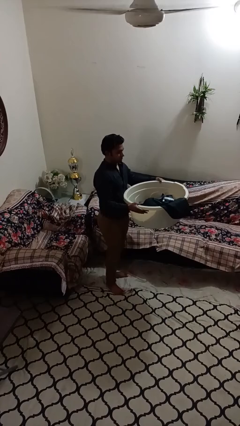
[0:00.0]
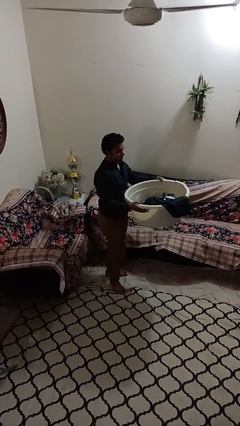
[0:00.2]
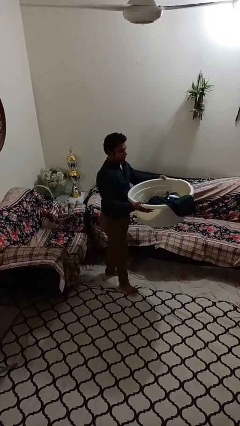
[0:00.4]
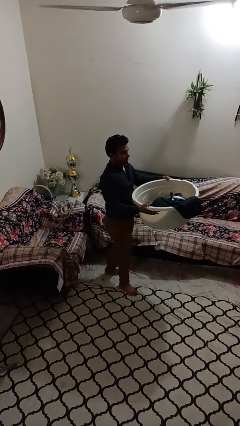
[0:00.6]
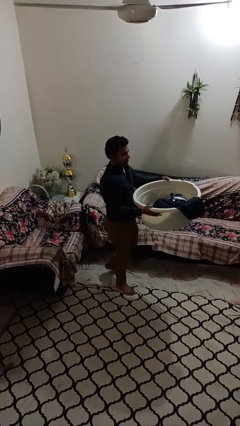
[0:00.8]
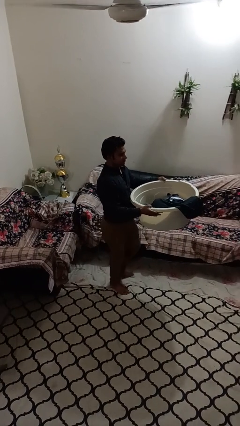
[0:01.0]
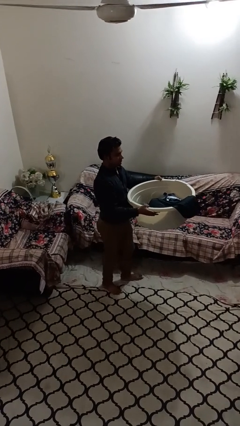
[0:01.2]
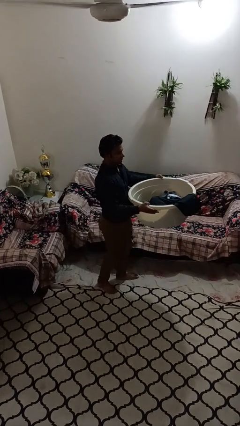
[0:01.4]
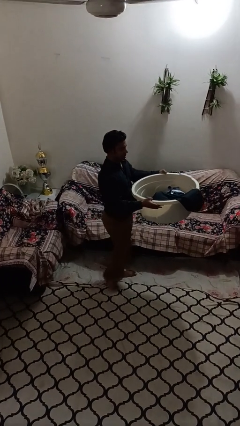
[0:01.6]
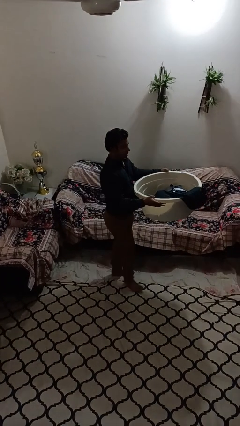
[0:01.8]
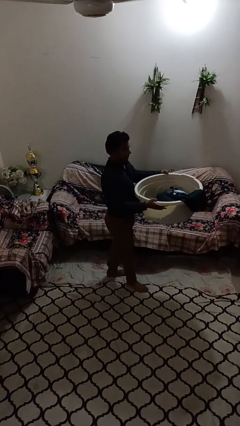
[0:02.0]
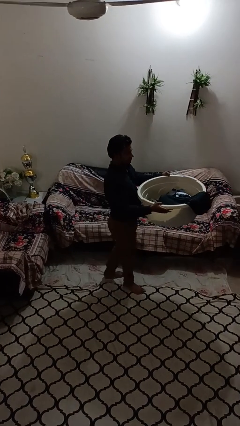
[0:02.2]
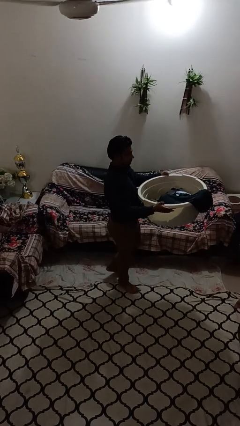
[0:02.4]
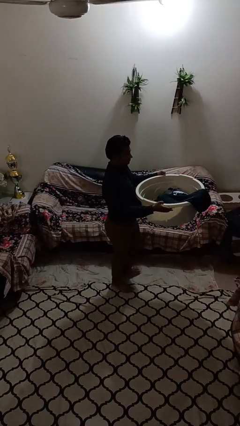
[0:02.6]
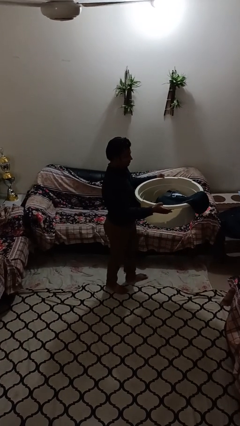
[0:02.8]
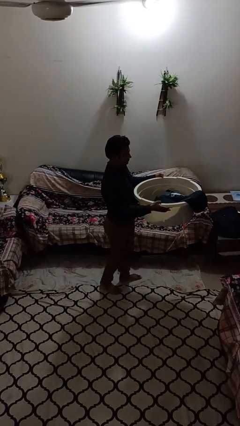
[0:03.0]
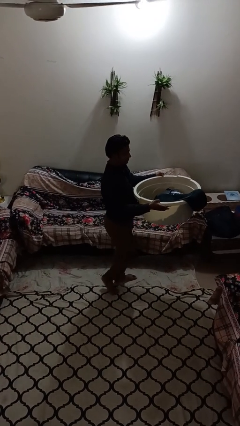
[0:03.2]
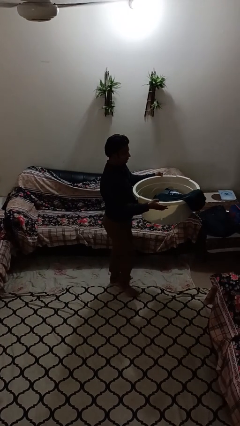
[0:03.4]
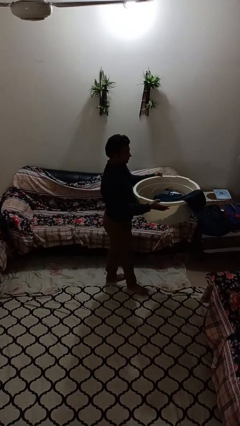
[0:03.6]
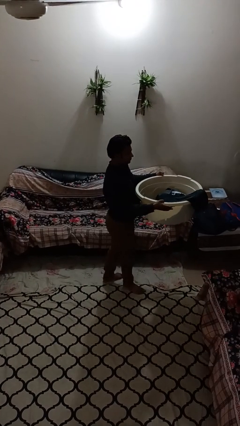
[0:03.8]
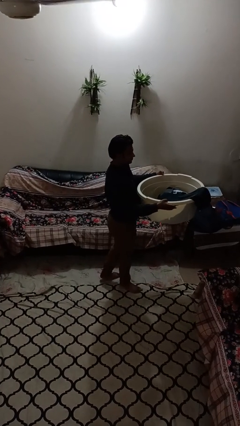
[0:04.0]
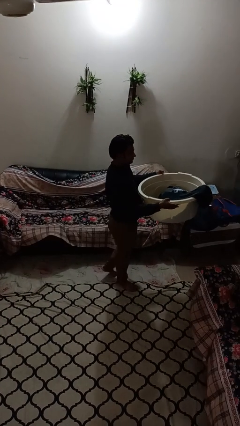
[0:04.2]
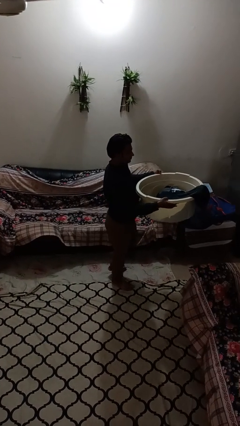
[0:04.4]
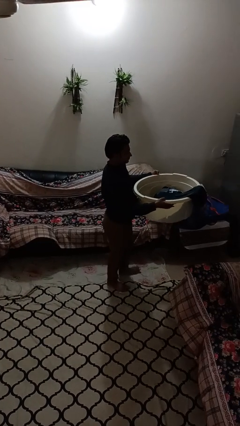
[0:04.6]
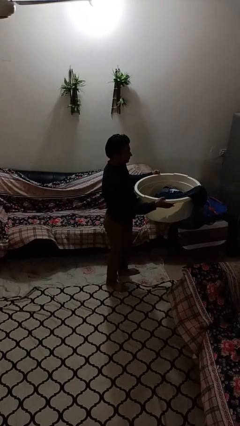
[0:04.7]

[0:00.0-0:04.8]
person carries laundry basket

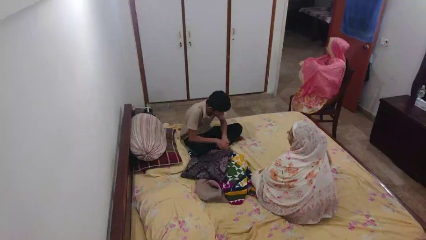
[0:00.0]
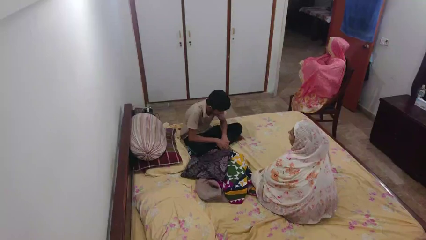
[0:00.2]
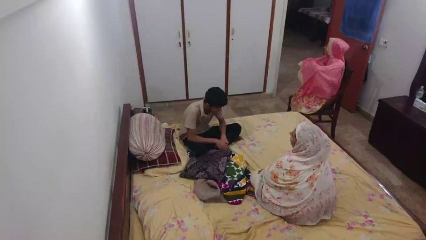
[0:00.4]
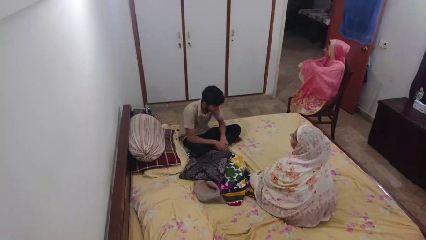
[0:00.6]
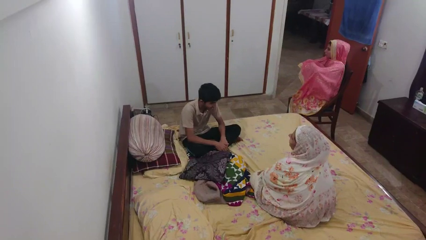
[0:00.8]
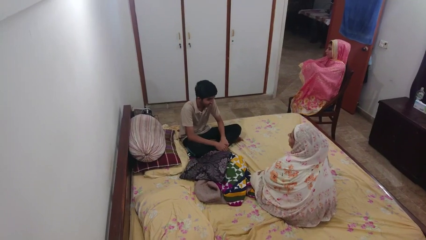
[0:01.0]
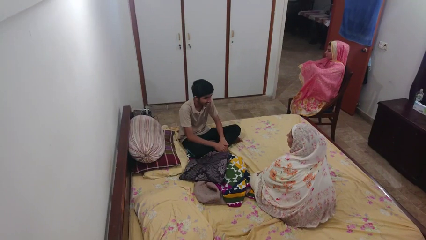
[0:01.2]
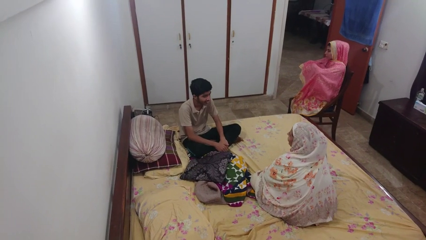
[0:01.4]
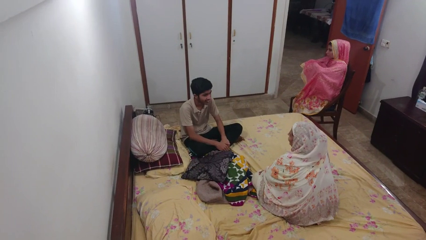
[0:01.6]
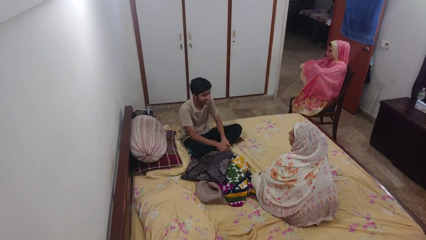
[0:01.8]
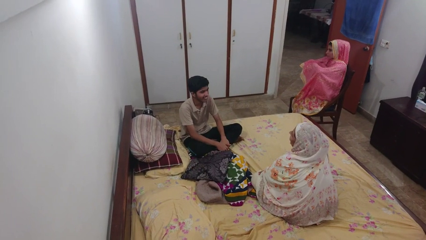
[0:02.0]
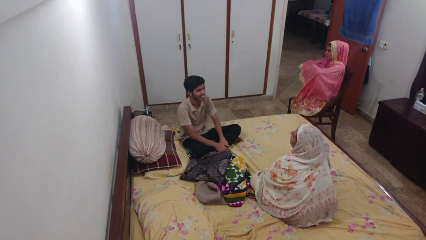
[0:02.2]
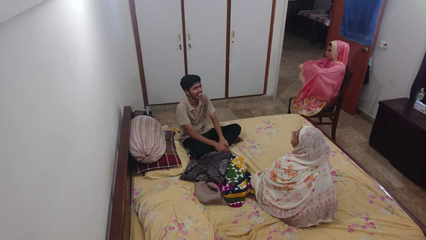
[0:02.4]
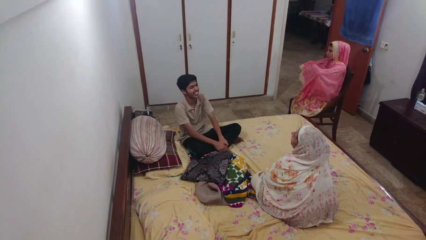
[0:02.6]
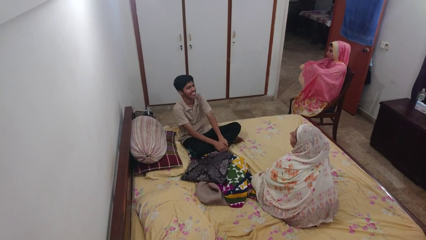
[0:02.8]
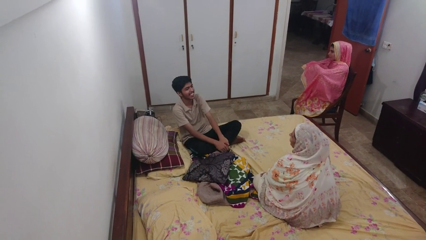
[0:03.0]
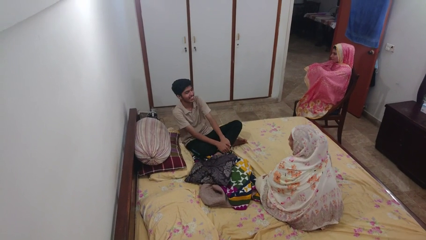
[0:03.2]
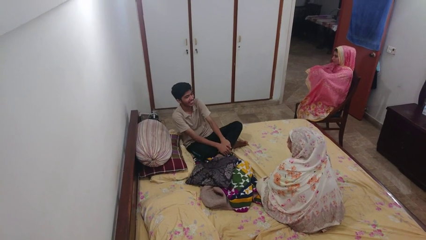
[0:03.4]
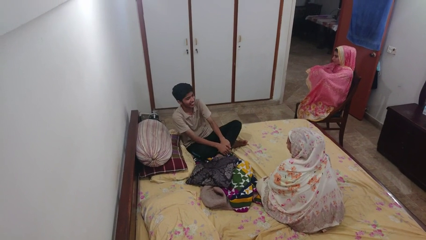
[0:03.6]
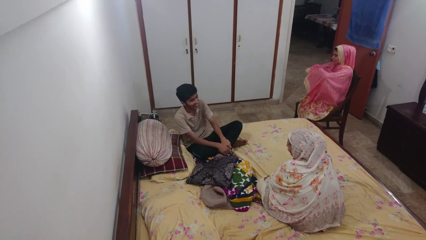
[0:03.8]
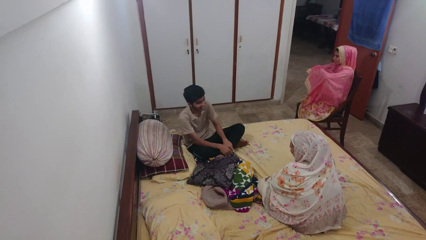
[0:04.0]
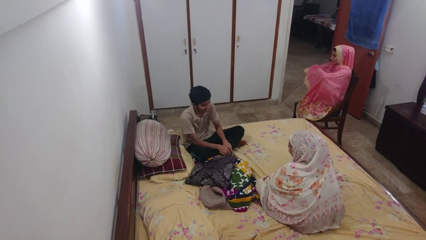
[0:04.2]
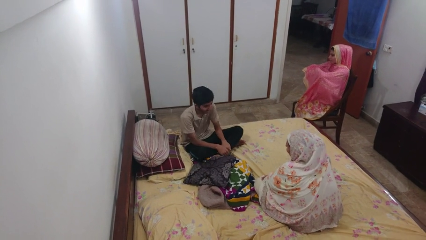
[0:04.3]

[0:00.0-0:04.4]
person laughs with person

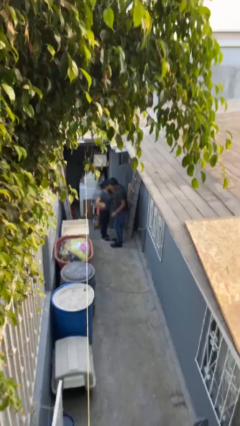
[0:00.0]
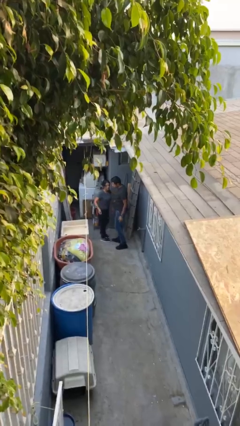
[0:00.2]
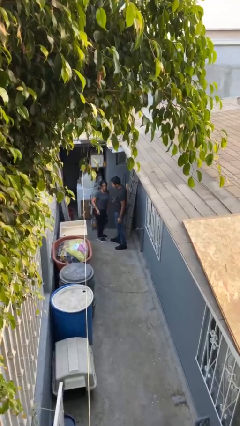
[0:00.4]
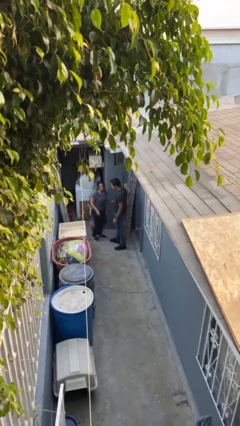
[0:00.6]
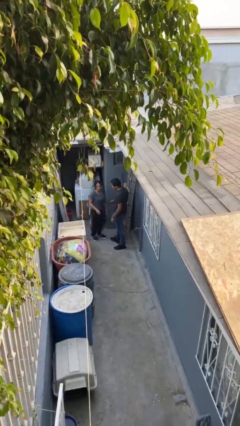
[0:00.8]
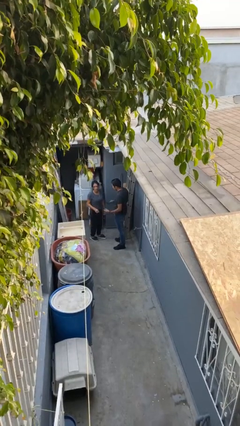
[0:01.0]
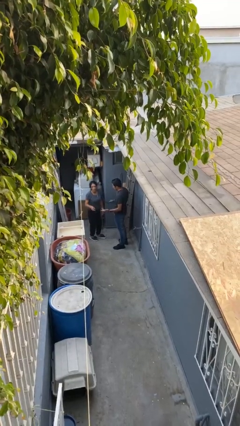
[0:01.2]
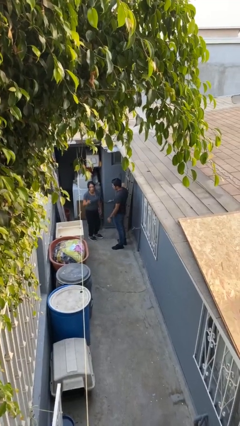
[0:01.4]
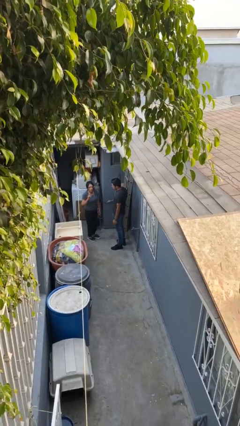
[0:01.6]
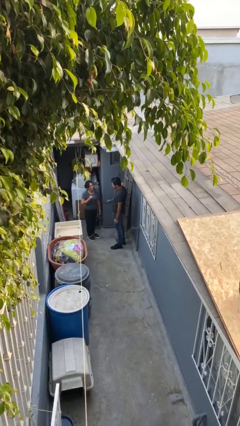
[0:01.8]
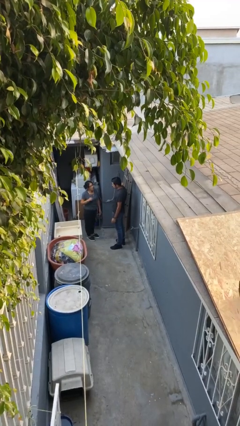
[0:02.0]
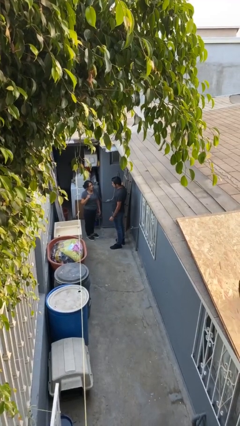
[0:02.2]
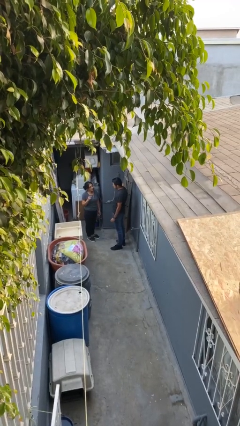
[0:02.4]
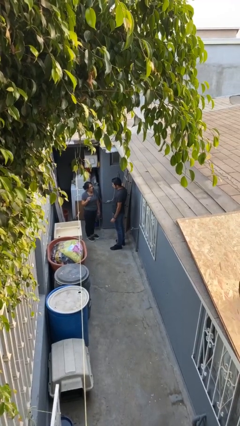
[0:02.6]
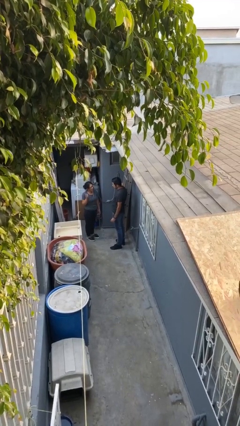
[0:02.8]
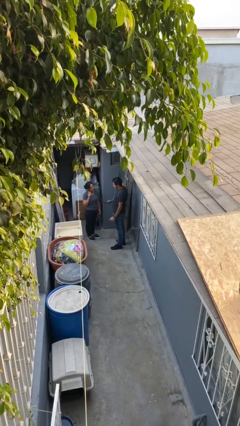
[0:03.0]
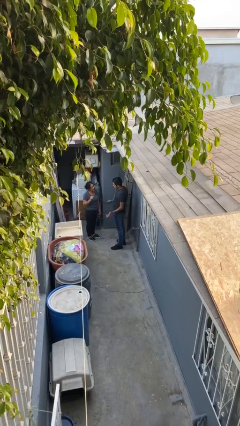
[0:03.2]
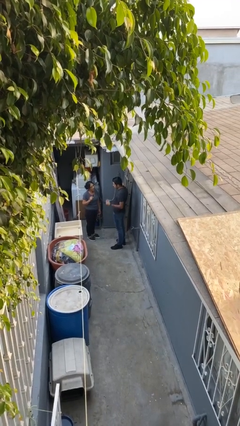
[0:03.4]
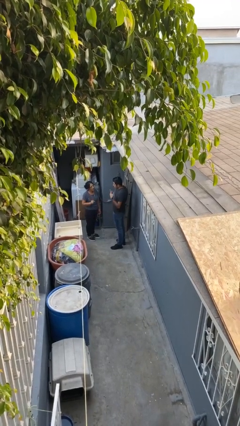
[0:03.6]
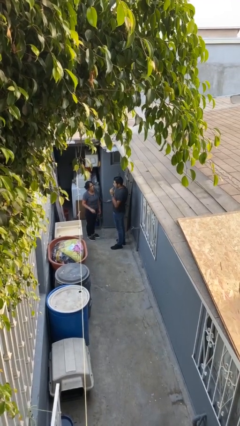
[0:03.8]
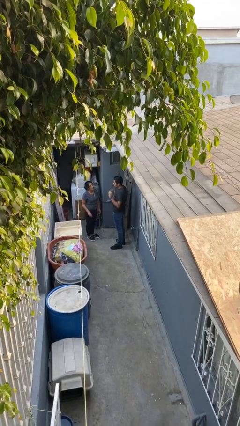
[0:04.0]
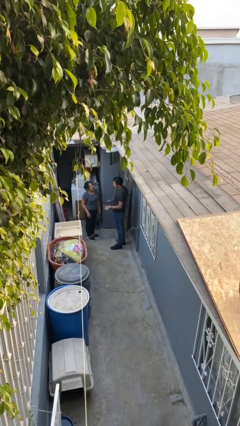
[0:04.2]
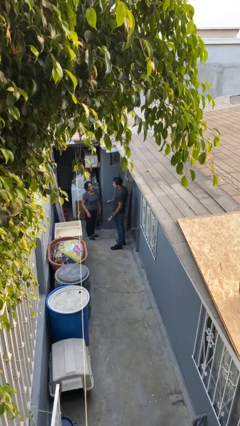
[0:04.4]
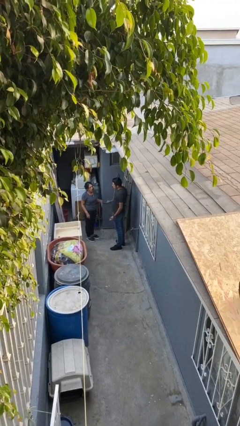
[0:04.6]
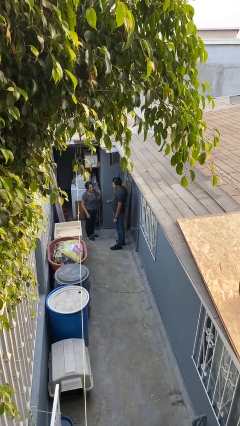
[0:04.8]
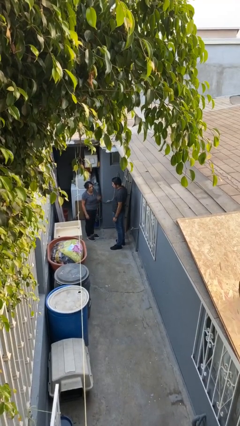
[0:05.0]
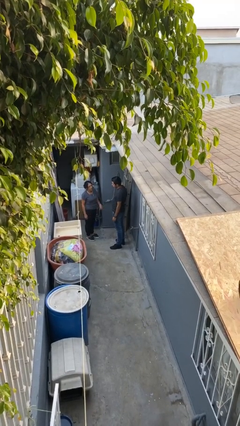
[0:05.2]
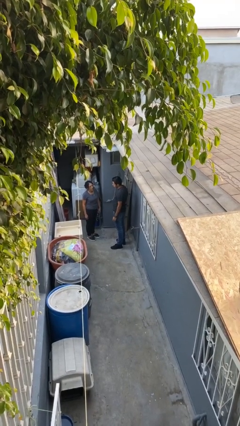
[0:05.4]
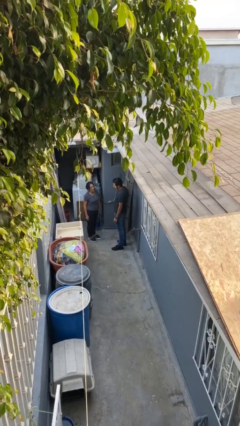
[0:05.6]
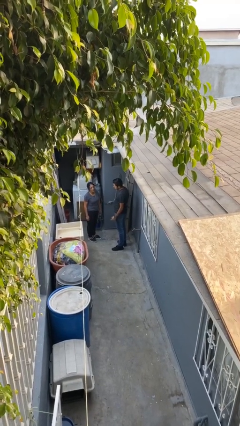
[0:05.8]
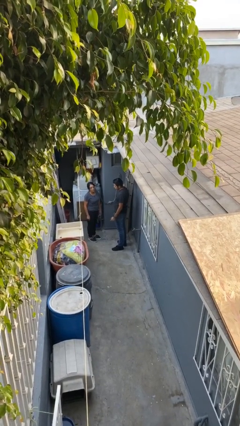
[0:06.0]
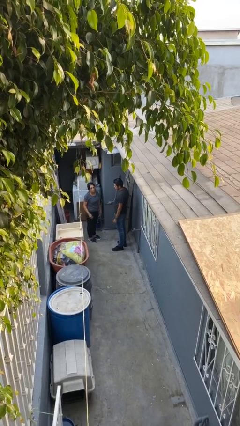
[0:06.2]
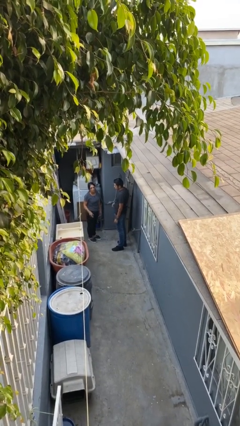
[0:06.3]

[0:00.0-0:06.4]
person talks to person

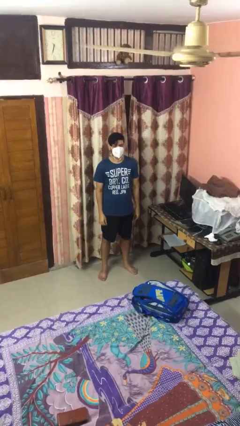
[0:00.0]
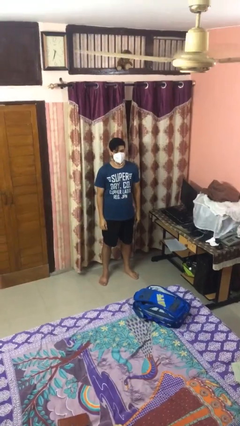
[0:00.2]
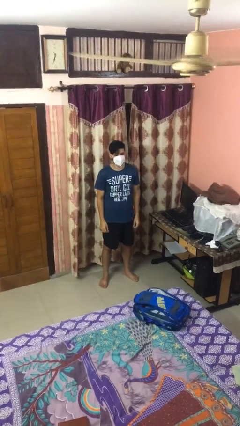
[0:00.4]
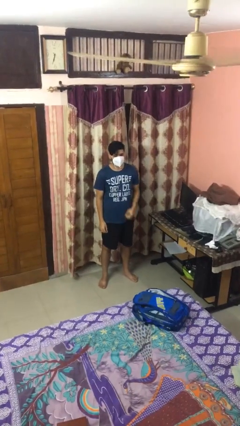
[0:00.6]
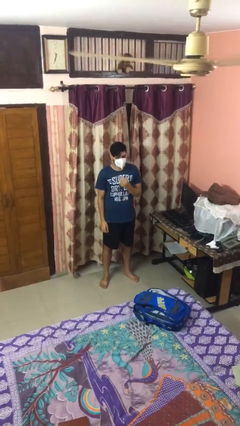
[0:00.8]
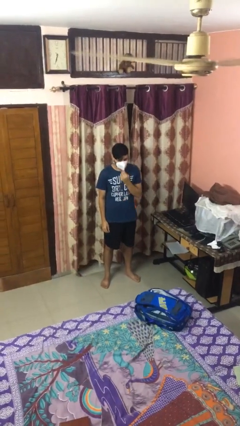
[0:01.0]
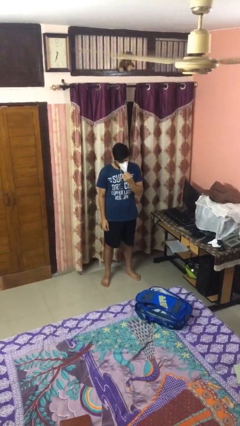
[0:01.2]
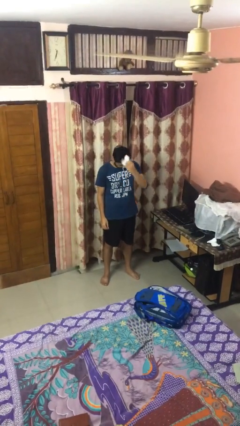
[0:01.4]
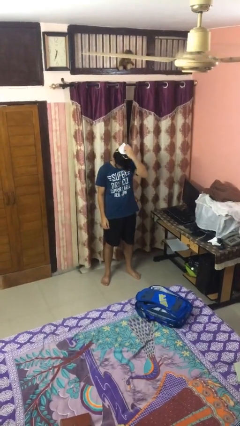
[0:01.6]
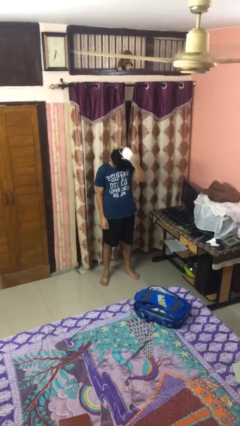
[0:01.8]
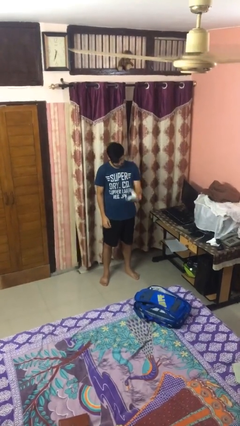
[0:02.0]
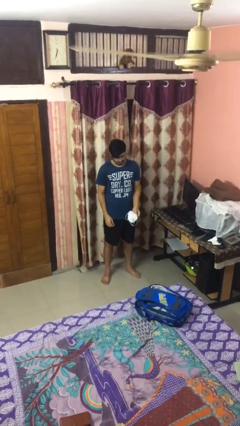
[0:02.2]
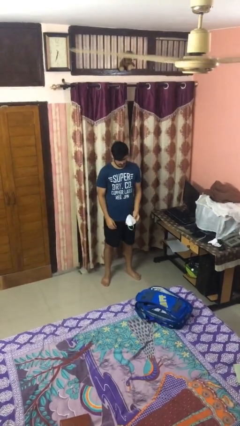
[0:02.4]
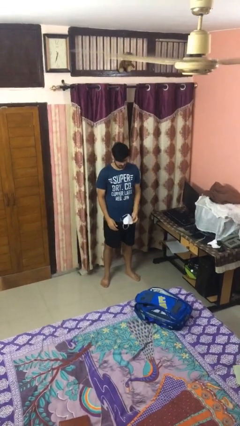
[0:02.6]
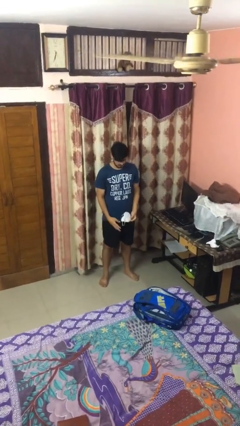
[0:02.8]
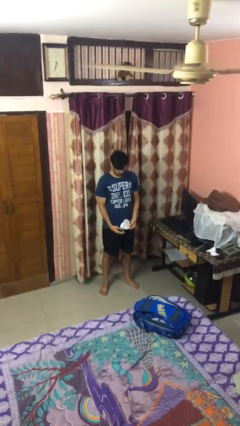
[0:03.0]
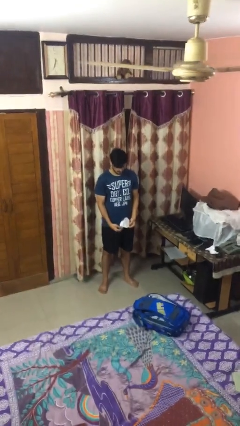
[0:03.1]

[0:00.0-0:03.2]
person takes off facemask
